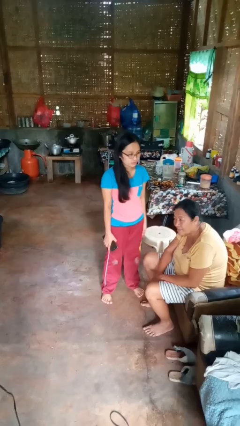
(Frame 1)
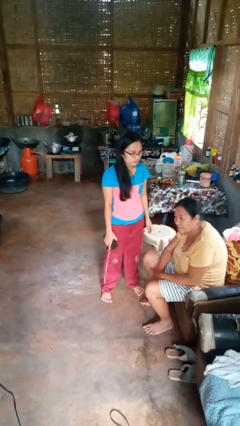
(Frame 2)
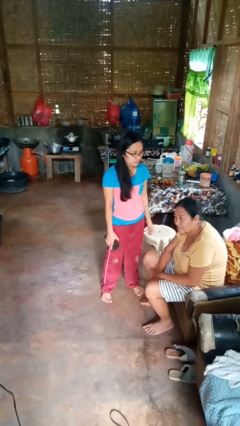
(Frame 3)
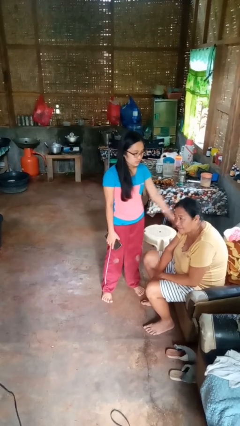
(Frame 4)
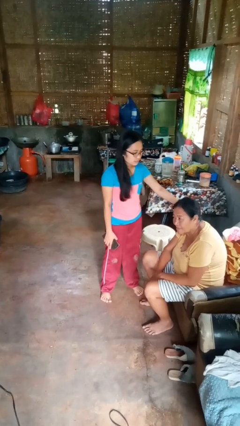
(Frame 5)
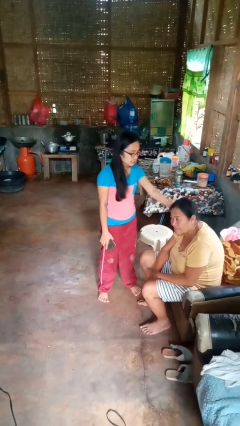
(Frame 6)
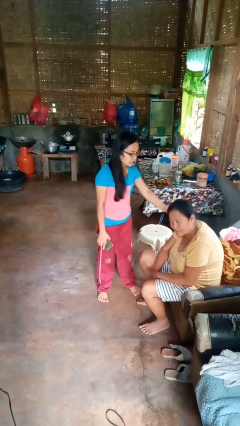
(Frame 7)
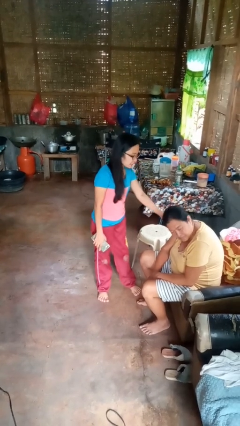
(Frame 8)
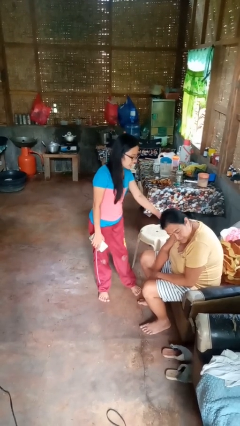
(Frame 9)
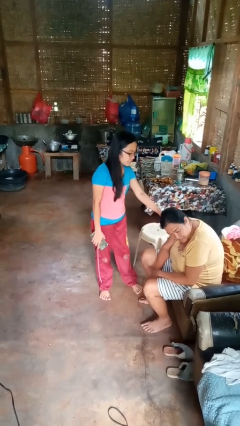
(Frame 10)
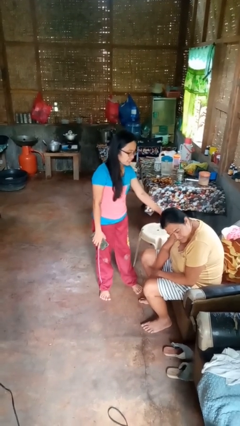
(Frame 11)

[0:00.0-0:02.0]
person grabs person by hair

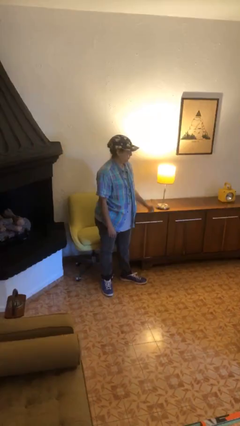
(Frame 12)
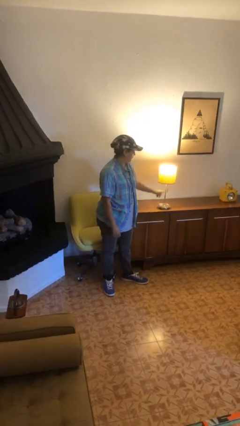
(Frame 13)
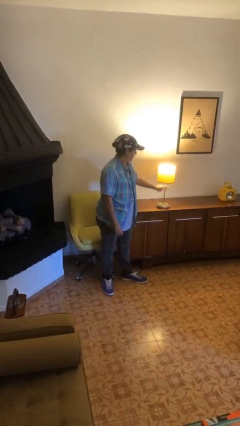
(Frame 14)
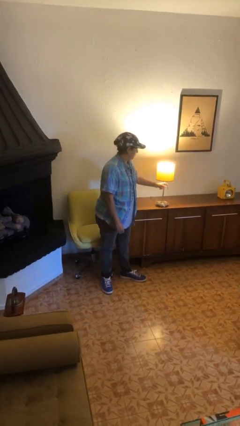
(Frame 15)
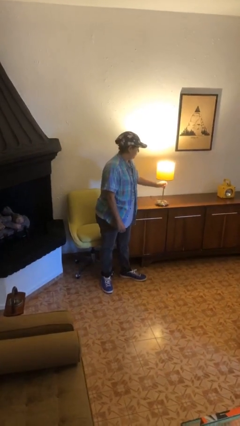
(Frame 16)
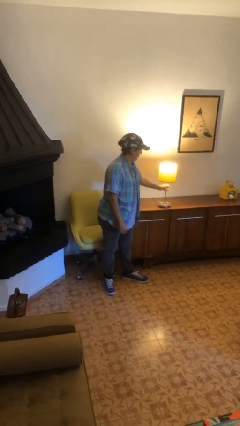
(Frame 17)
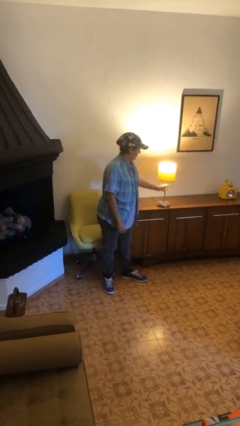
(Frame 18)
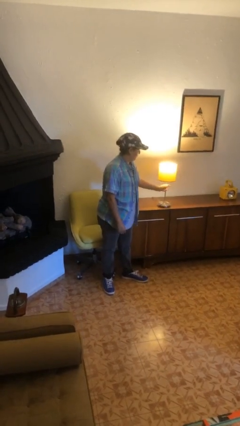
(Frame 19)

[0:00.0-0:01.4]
person turns off lamp

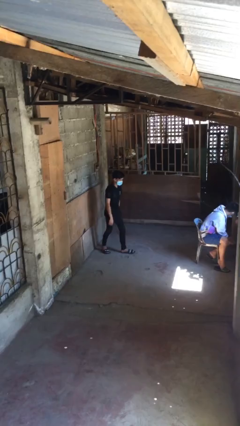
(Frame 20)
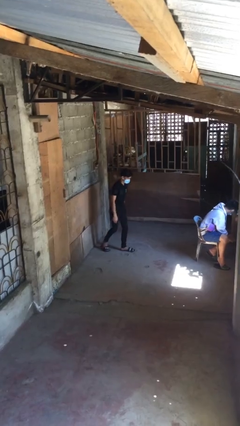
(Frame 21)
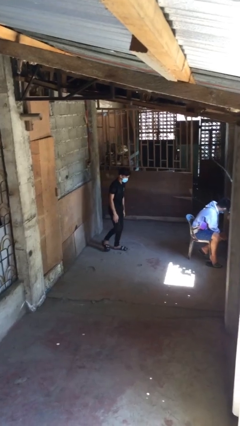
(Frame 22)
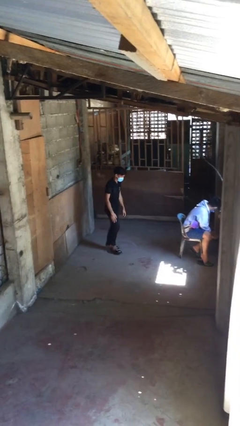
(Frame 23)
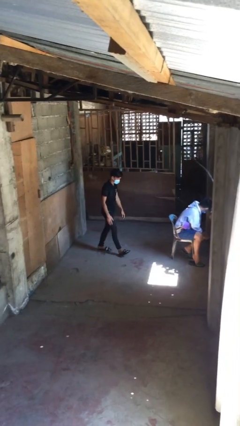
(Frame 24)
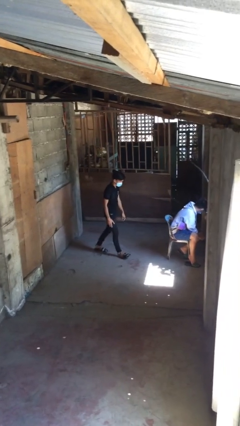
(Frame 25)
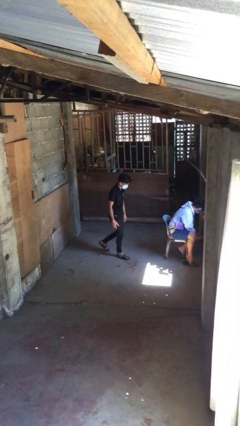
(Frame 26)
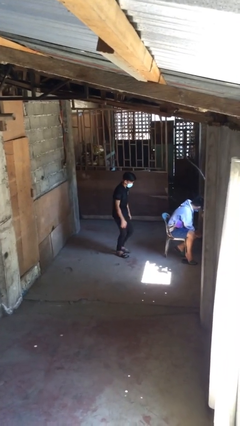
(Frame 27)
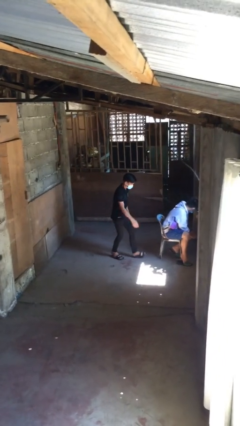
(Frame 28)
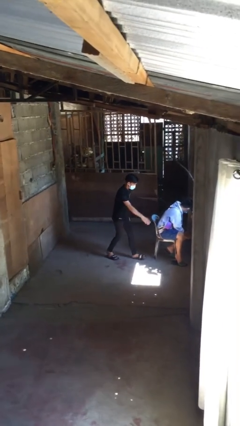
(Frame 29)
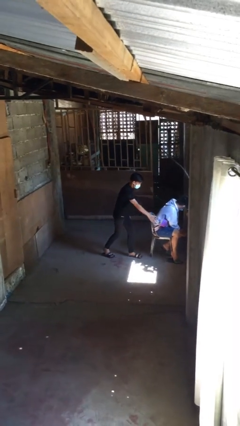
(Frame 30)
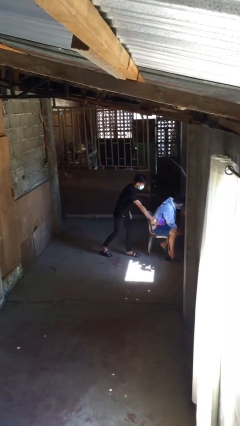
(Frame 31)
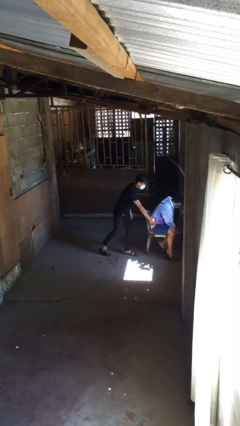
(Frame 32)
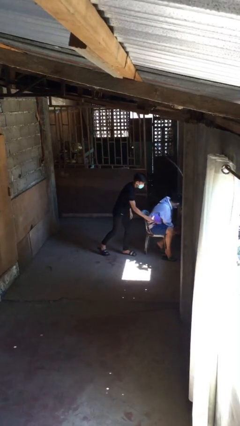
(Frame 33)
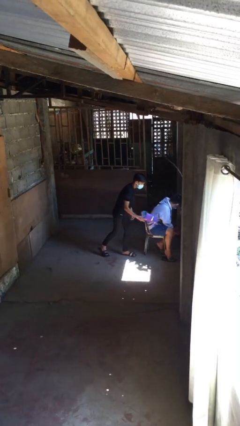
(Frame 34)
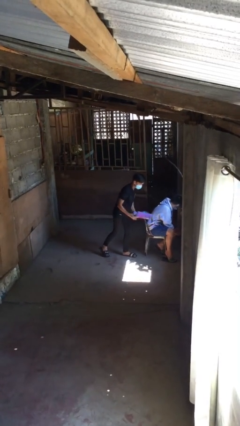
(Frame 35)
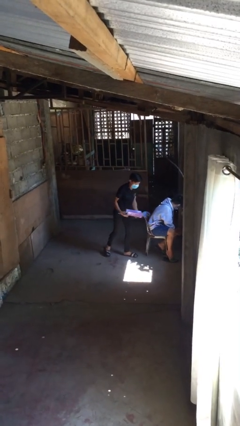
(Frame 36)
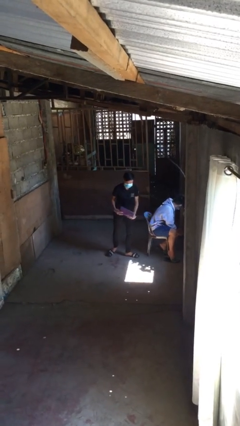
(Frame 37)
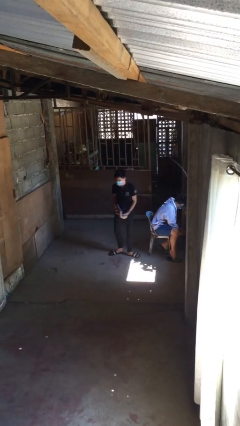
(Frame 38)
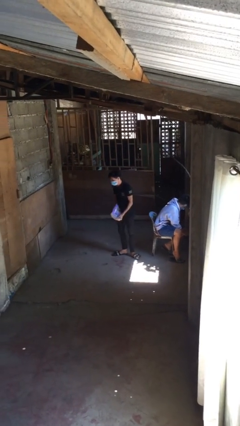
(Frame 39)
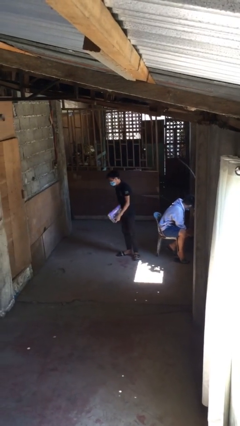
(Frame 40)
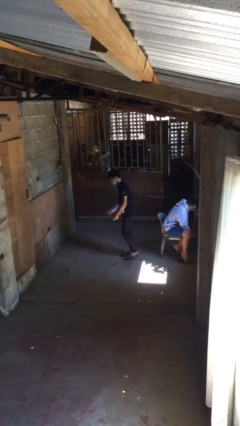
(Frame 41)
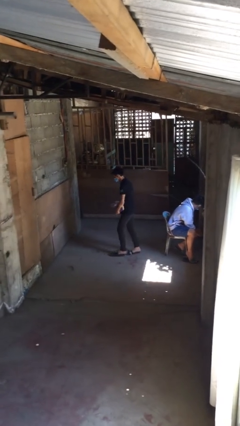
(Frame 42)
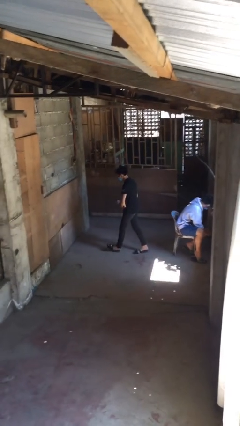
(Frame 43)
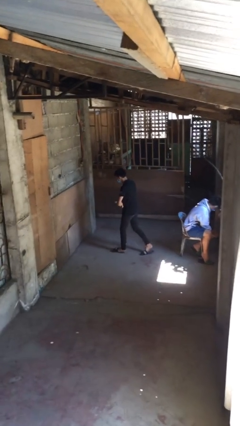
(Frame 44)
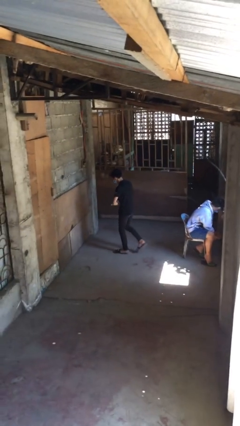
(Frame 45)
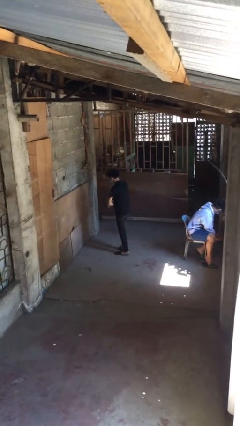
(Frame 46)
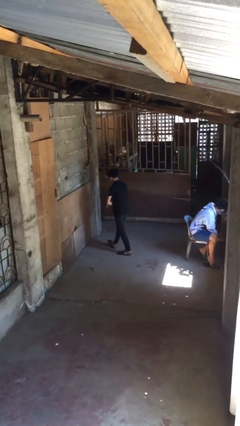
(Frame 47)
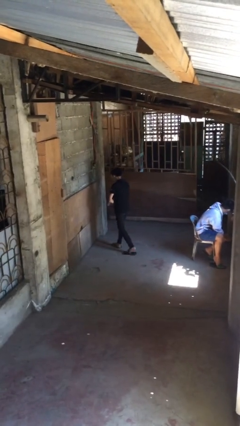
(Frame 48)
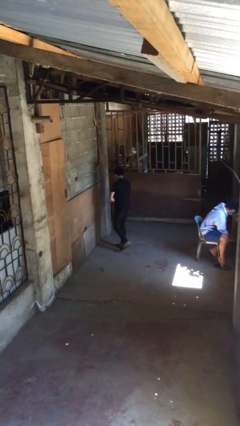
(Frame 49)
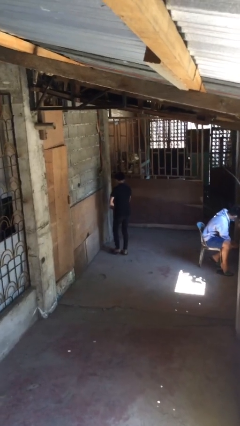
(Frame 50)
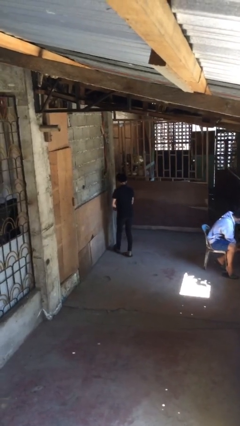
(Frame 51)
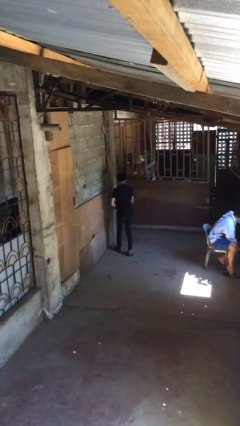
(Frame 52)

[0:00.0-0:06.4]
person steals object from person

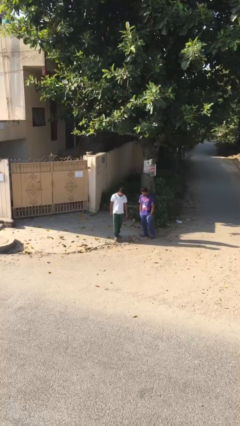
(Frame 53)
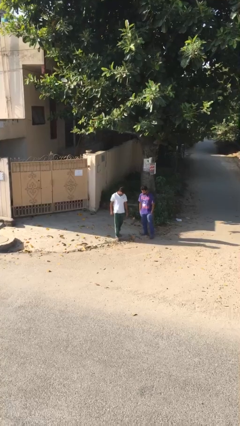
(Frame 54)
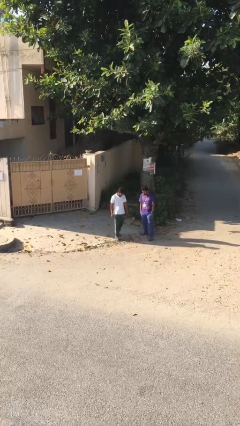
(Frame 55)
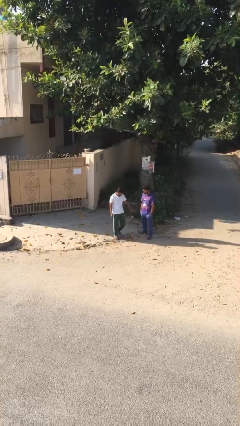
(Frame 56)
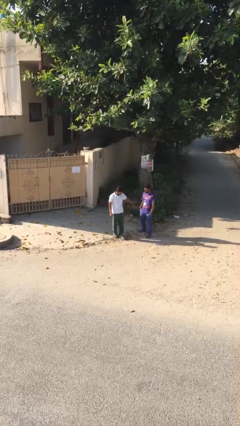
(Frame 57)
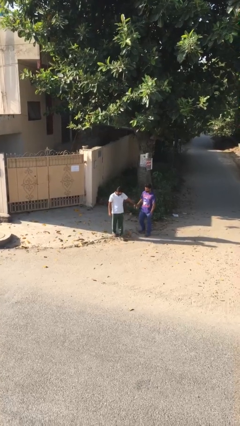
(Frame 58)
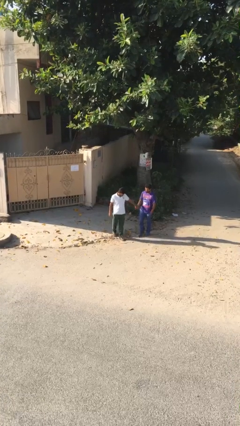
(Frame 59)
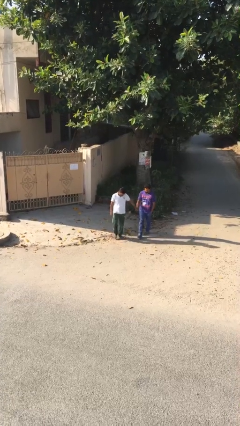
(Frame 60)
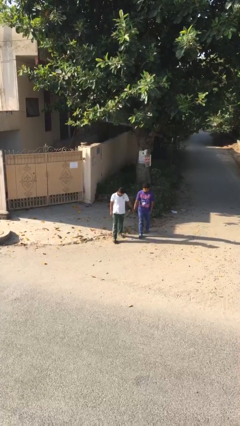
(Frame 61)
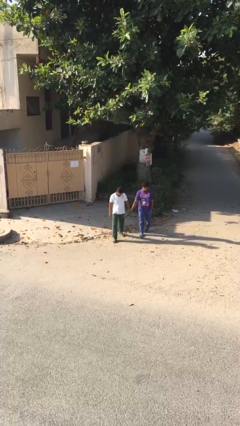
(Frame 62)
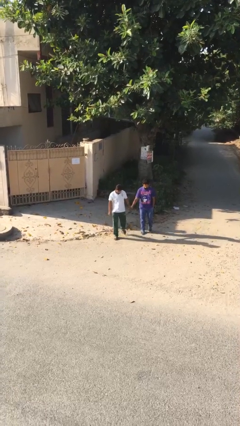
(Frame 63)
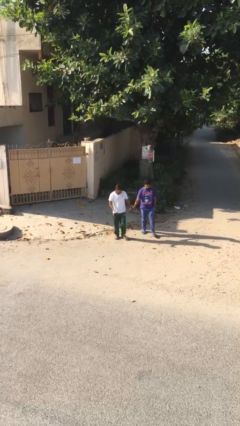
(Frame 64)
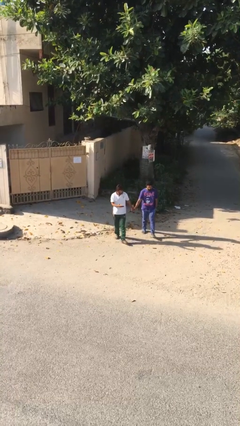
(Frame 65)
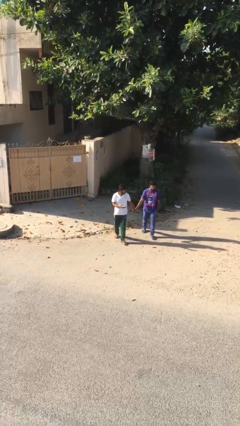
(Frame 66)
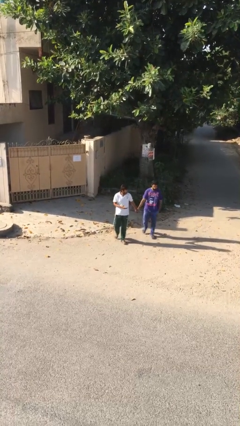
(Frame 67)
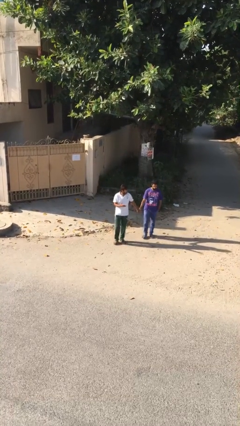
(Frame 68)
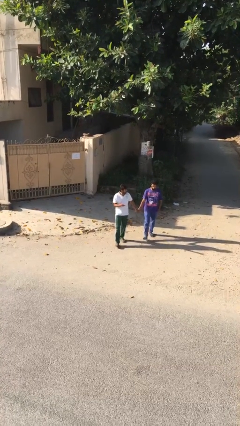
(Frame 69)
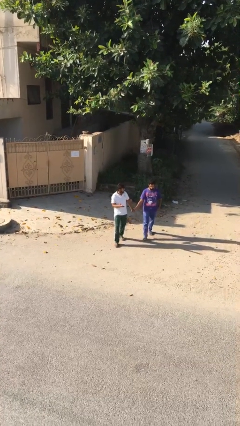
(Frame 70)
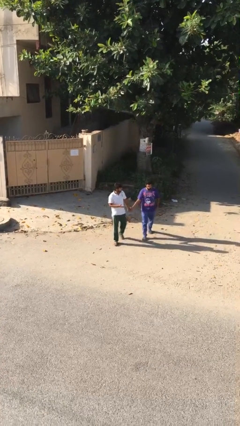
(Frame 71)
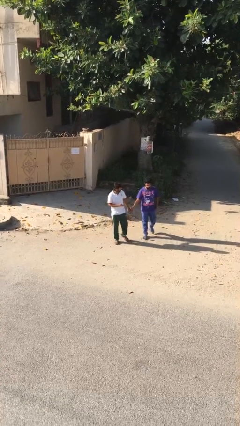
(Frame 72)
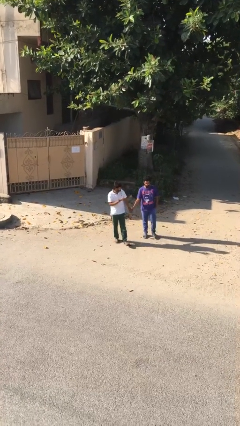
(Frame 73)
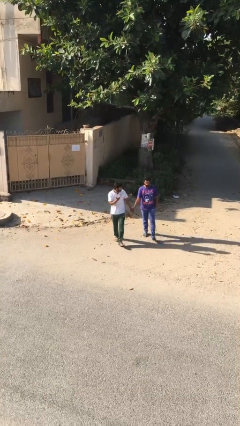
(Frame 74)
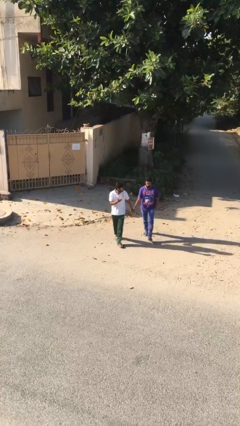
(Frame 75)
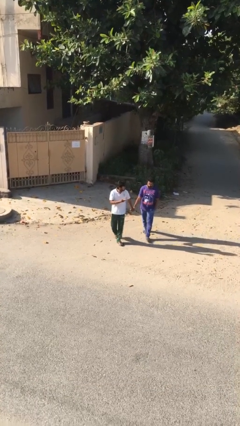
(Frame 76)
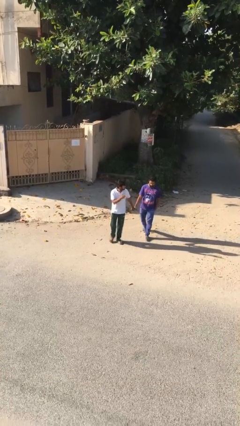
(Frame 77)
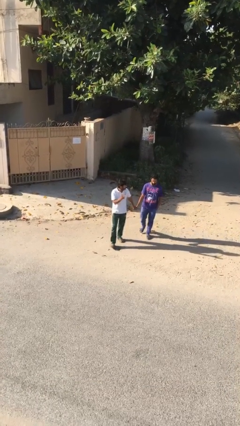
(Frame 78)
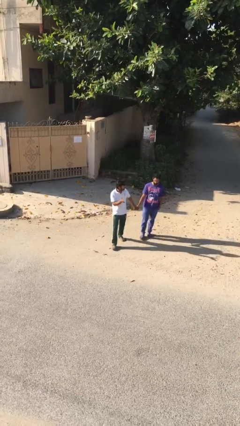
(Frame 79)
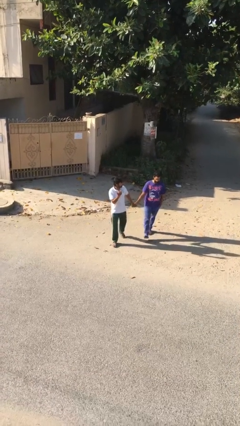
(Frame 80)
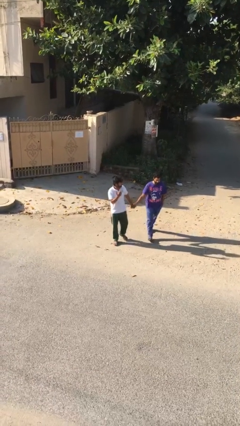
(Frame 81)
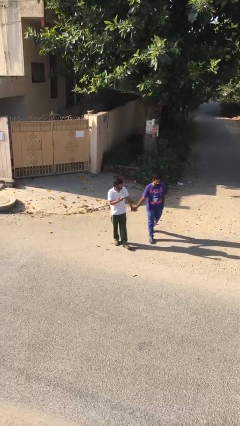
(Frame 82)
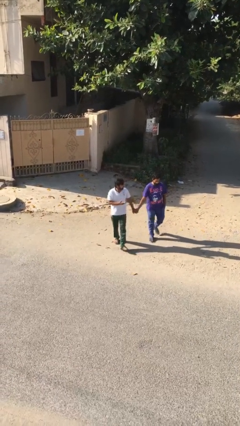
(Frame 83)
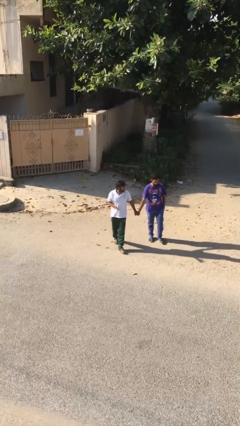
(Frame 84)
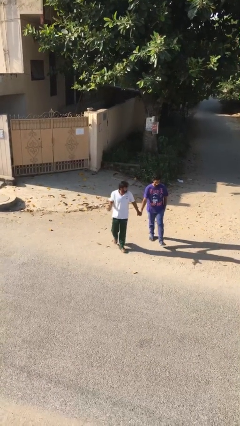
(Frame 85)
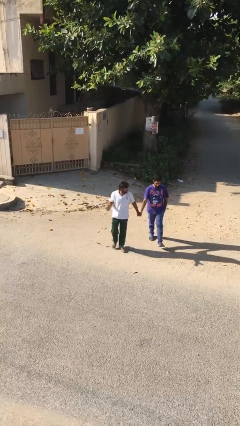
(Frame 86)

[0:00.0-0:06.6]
person holds hand

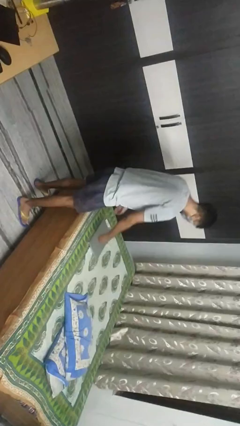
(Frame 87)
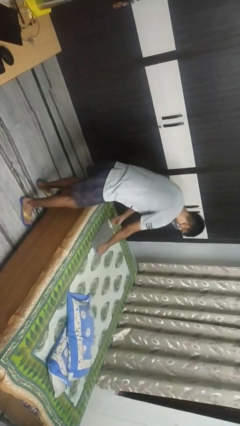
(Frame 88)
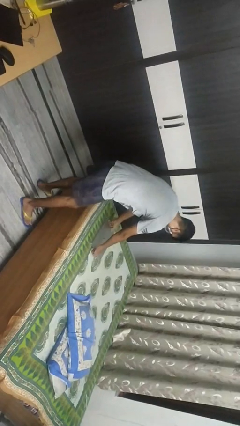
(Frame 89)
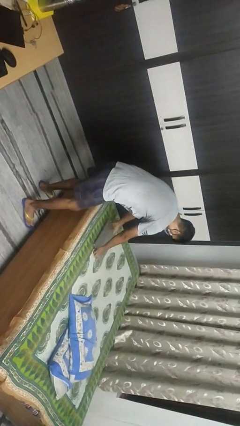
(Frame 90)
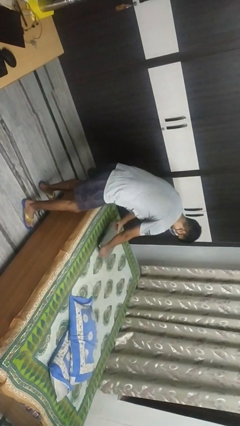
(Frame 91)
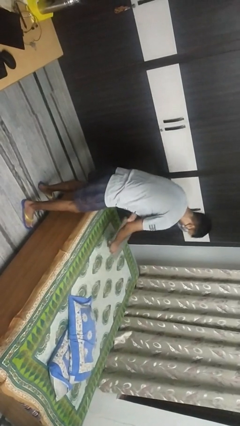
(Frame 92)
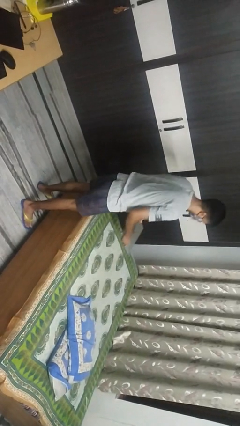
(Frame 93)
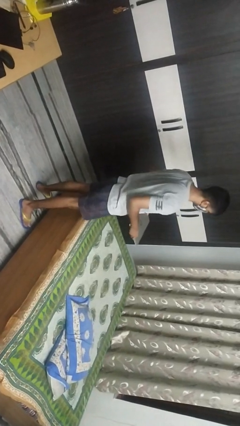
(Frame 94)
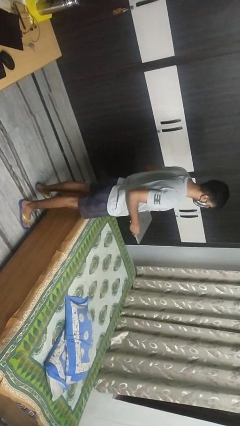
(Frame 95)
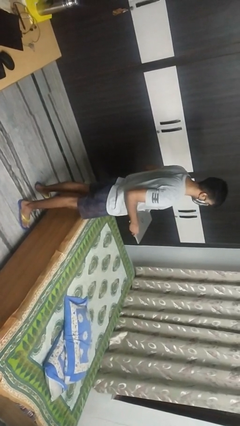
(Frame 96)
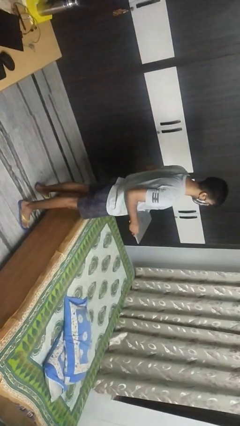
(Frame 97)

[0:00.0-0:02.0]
person picks up object from bed
